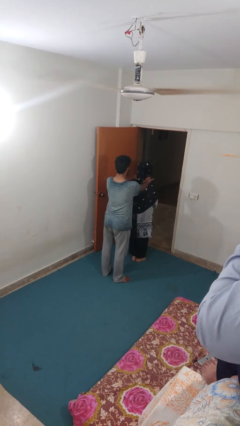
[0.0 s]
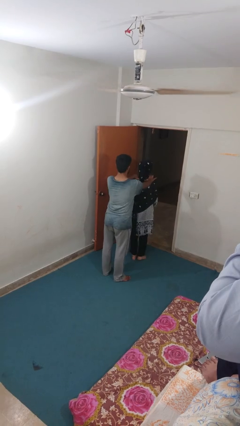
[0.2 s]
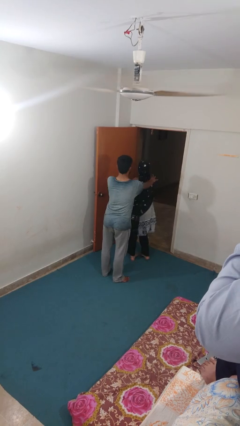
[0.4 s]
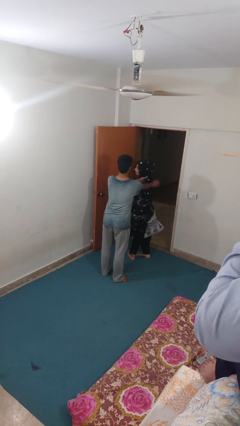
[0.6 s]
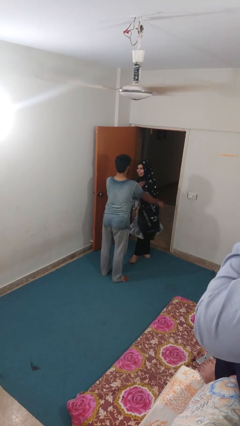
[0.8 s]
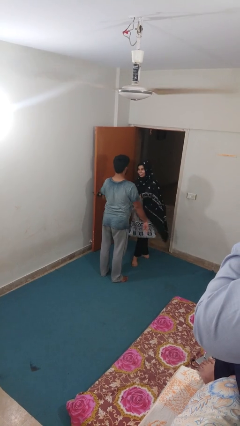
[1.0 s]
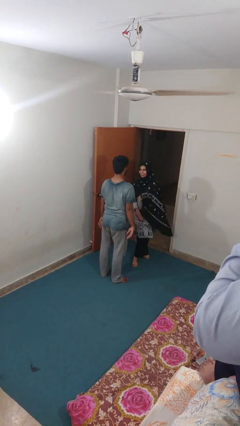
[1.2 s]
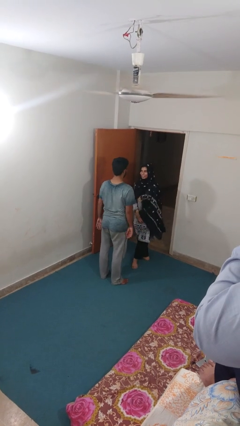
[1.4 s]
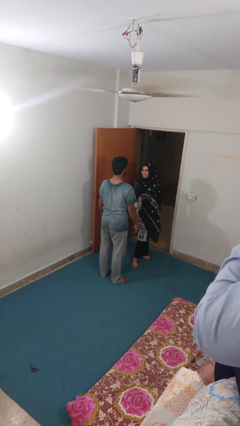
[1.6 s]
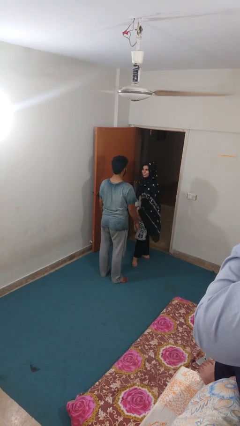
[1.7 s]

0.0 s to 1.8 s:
person spins person around

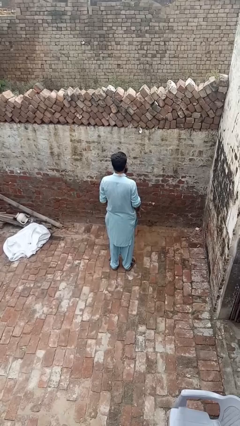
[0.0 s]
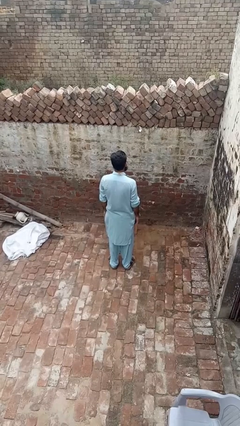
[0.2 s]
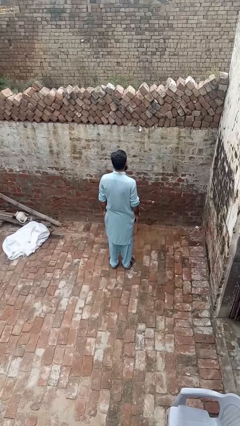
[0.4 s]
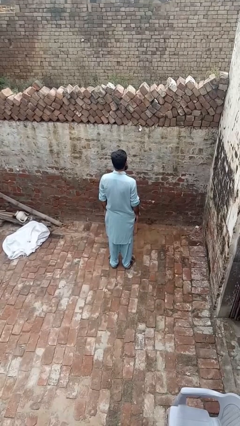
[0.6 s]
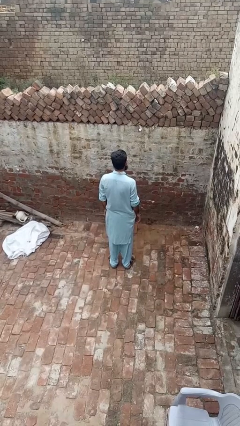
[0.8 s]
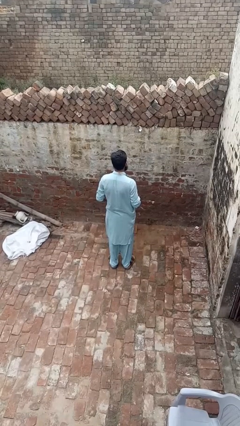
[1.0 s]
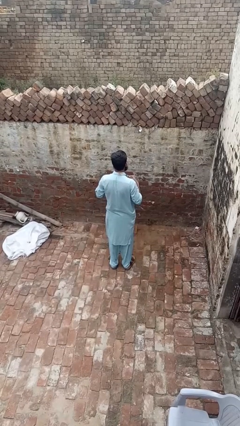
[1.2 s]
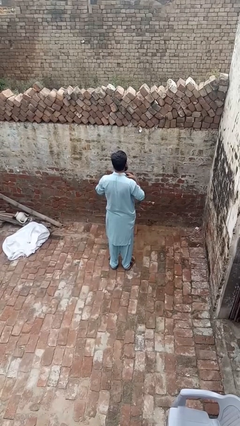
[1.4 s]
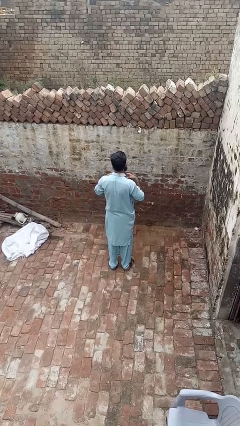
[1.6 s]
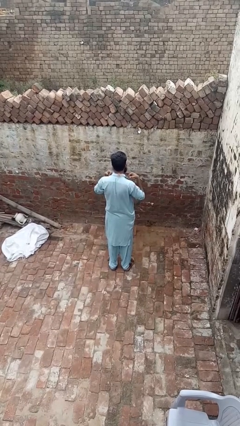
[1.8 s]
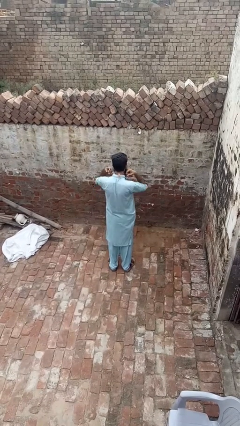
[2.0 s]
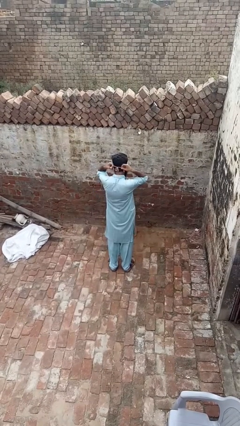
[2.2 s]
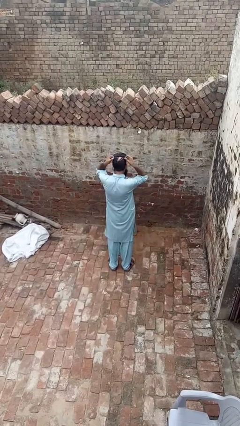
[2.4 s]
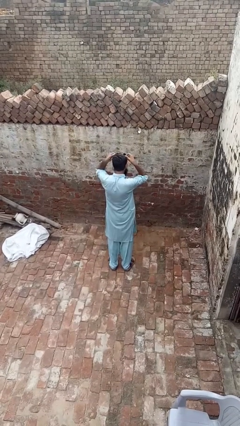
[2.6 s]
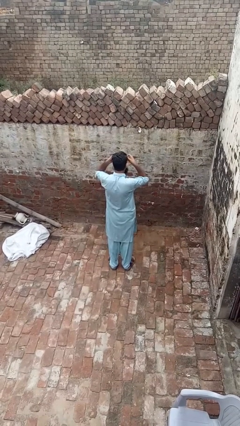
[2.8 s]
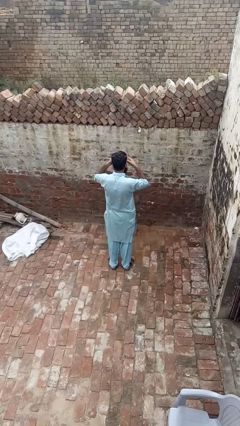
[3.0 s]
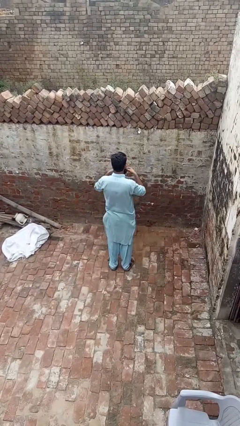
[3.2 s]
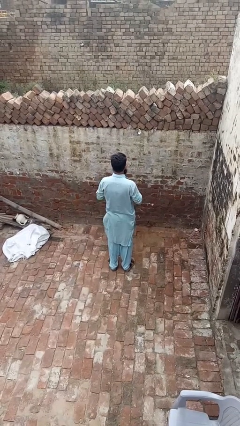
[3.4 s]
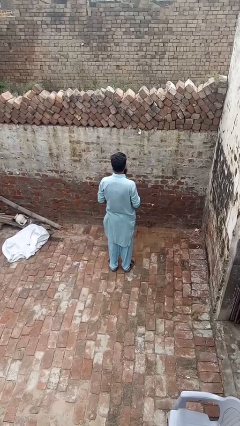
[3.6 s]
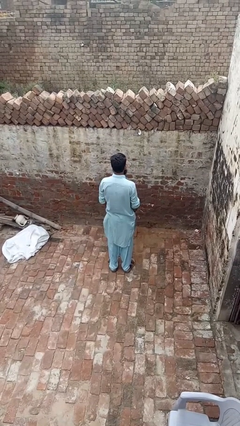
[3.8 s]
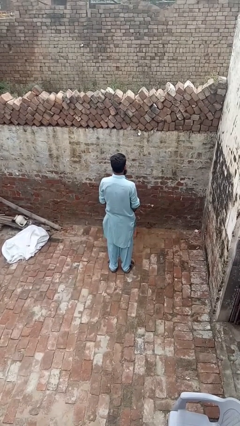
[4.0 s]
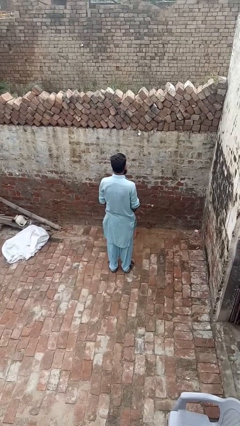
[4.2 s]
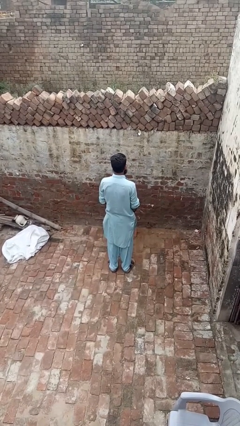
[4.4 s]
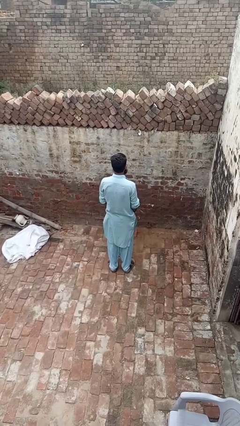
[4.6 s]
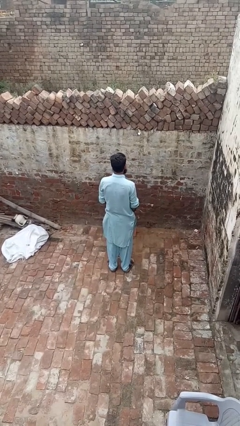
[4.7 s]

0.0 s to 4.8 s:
person takes off necklace

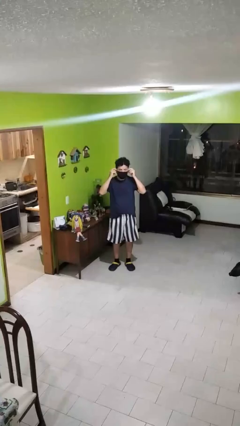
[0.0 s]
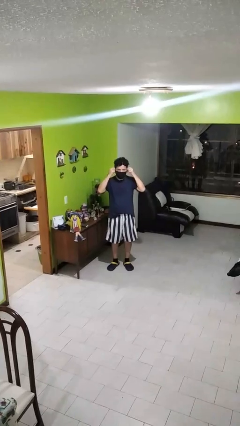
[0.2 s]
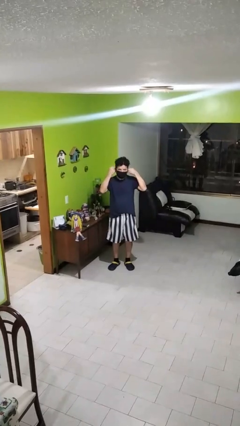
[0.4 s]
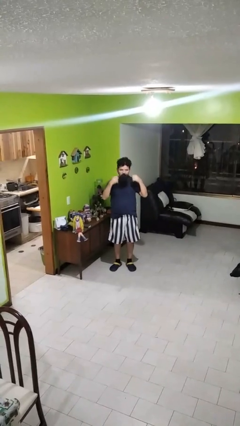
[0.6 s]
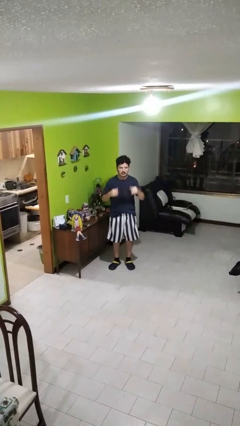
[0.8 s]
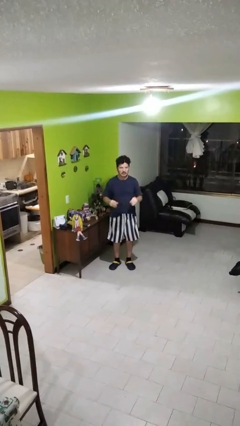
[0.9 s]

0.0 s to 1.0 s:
person takes off facemask

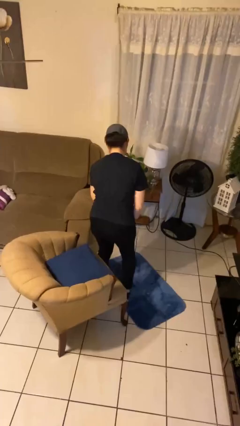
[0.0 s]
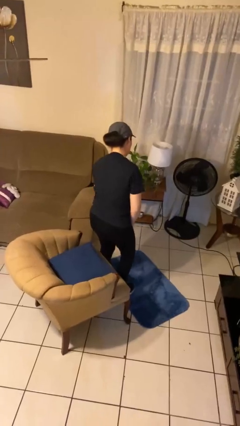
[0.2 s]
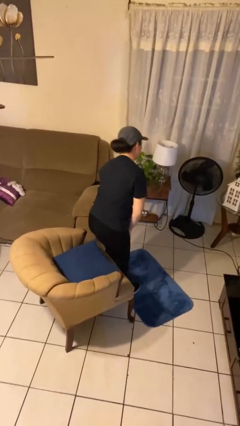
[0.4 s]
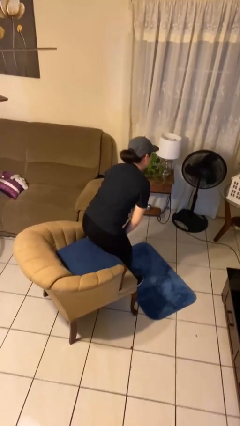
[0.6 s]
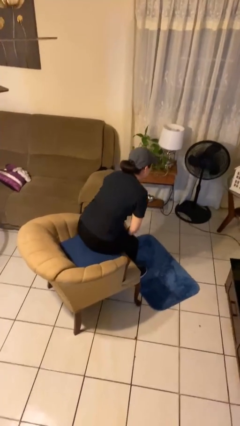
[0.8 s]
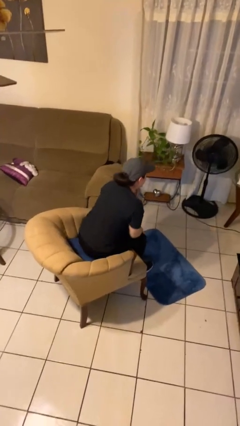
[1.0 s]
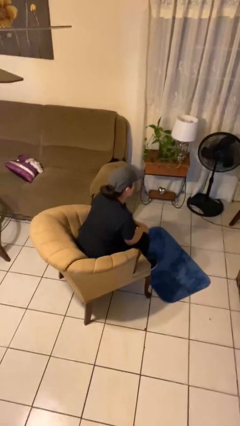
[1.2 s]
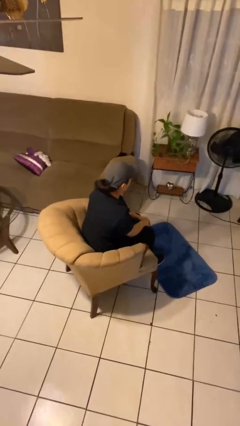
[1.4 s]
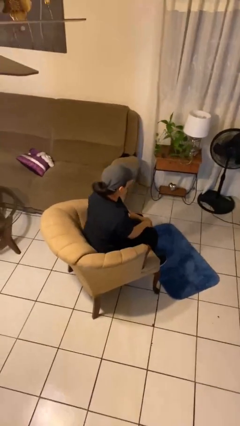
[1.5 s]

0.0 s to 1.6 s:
person sits down

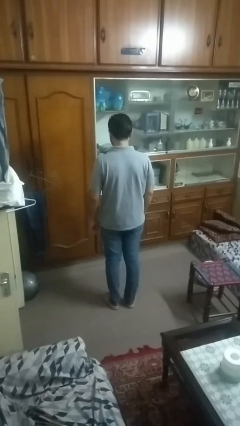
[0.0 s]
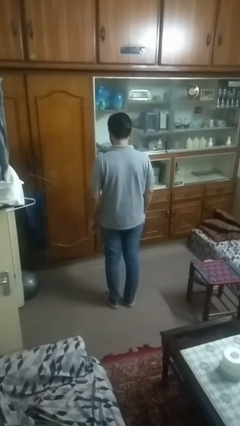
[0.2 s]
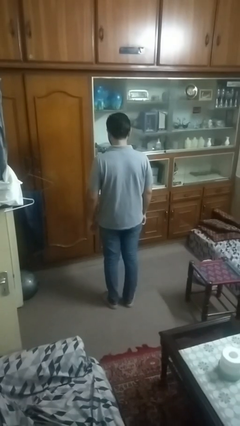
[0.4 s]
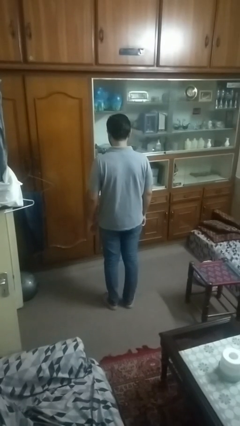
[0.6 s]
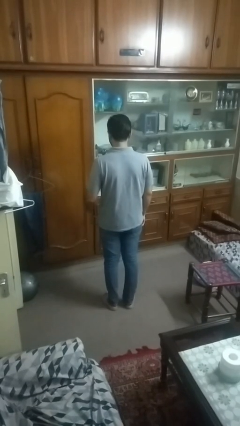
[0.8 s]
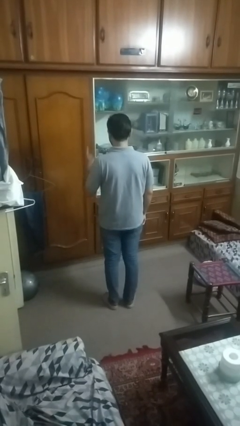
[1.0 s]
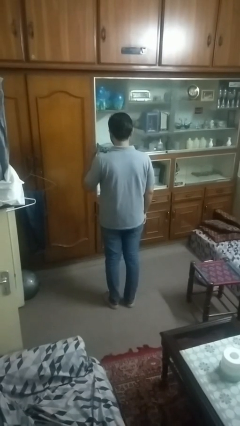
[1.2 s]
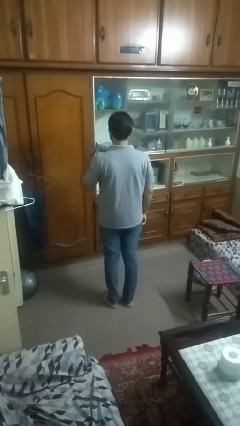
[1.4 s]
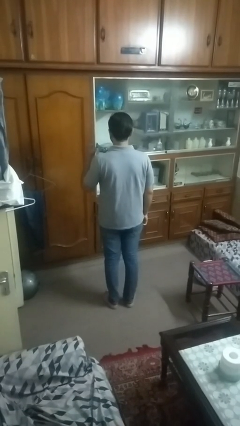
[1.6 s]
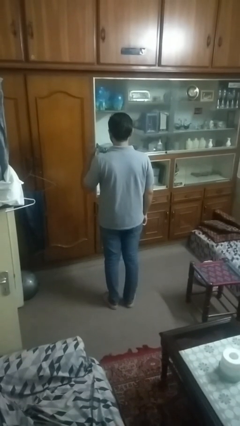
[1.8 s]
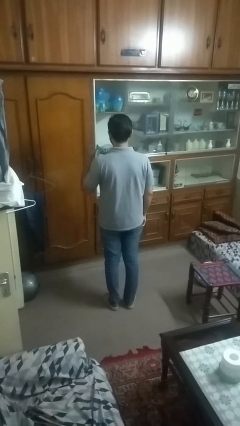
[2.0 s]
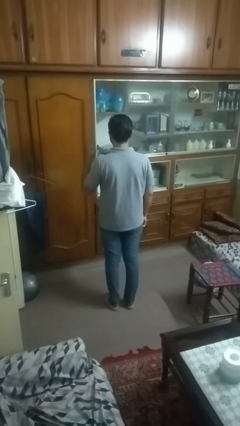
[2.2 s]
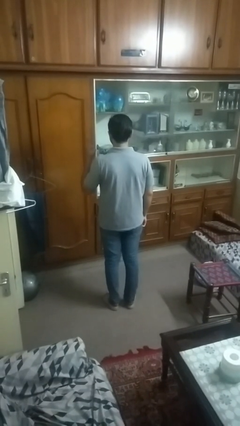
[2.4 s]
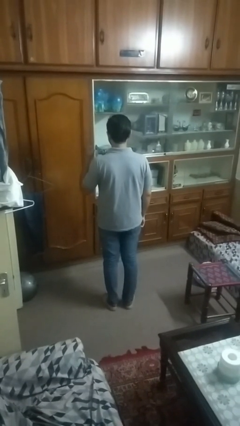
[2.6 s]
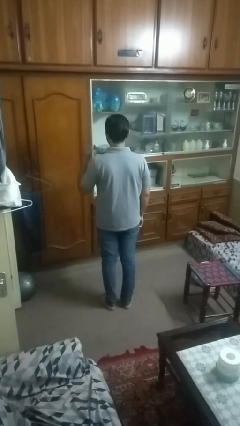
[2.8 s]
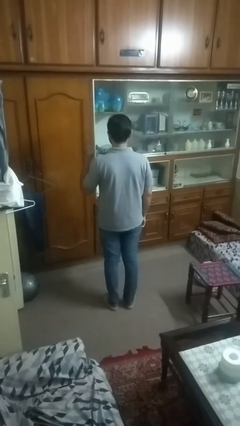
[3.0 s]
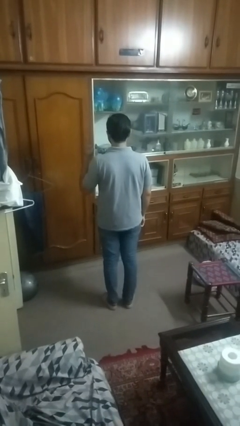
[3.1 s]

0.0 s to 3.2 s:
person gestures number one

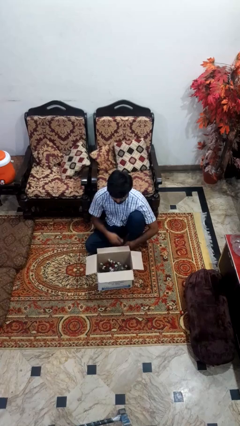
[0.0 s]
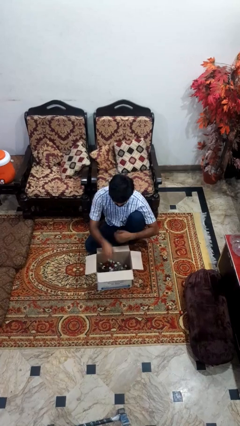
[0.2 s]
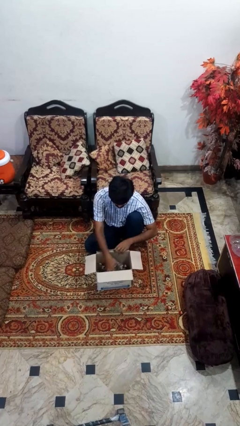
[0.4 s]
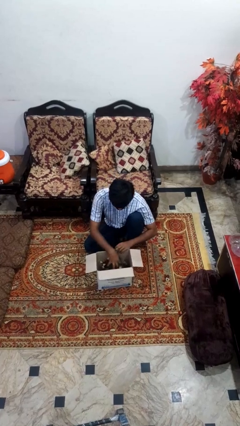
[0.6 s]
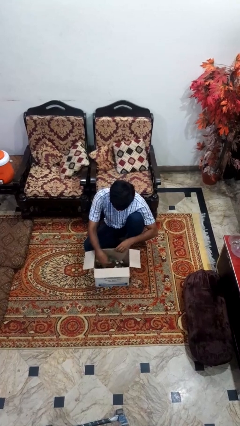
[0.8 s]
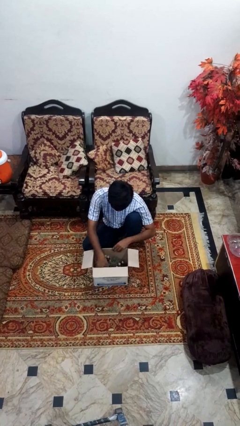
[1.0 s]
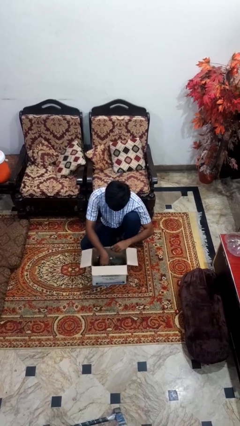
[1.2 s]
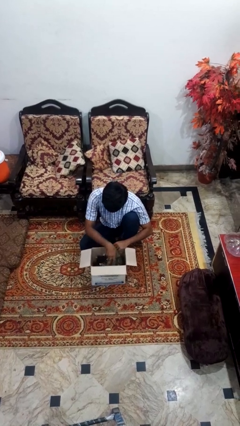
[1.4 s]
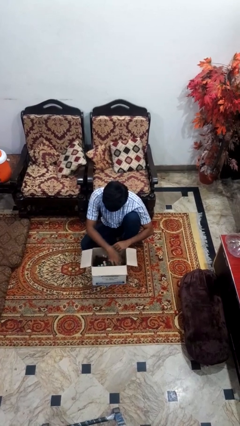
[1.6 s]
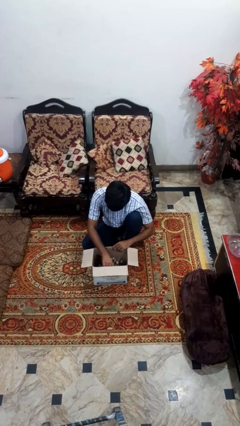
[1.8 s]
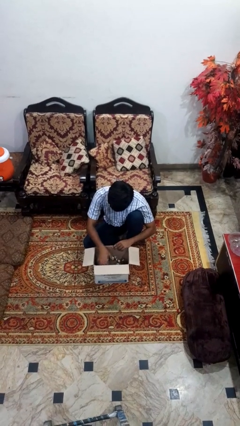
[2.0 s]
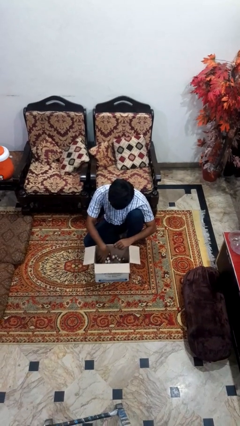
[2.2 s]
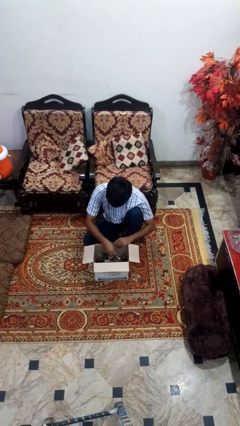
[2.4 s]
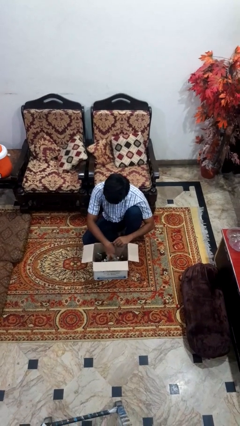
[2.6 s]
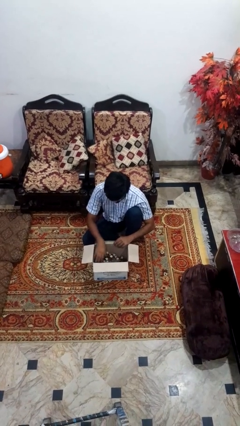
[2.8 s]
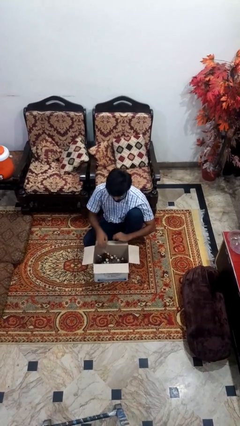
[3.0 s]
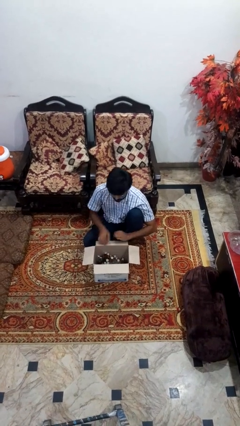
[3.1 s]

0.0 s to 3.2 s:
person searches in box

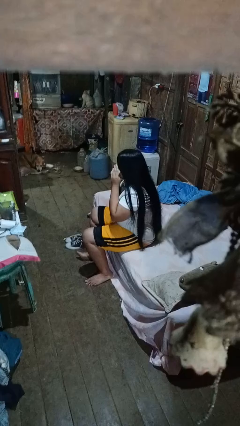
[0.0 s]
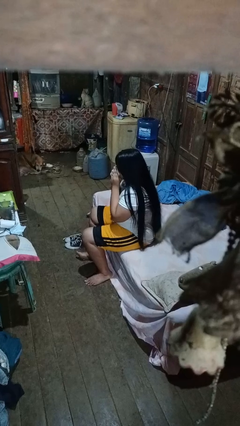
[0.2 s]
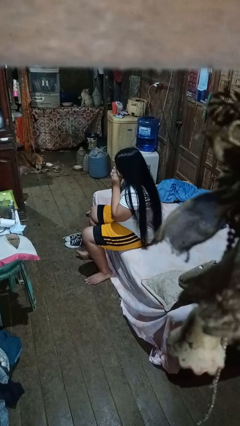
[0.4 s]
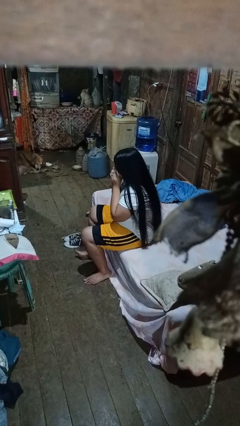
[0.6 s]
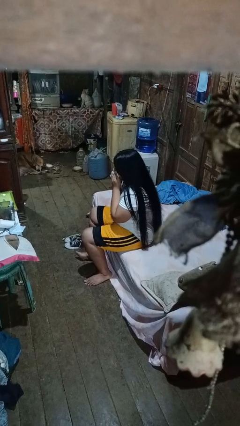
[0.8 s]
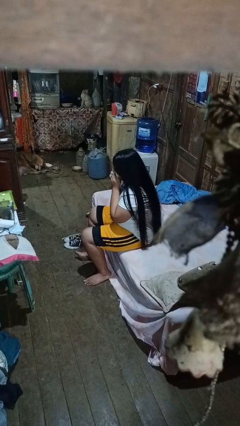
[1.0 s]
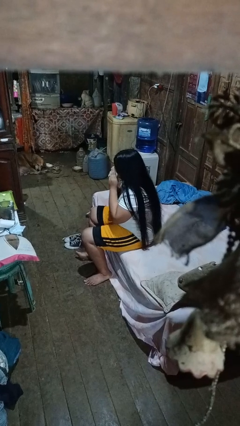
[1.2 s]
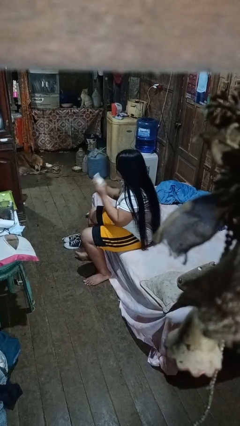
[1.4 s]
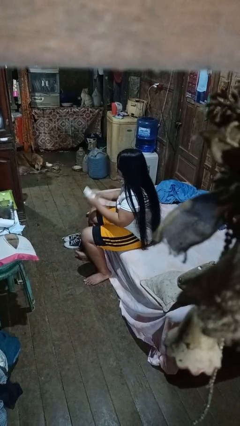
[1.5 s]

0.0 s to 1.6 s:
person blows nose
